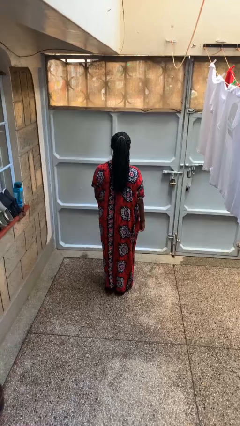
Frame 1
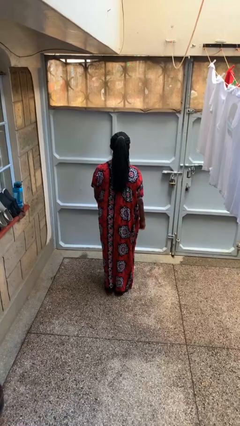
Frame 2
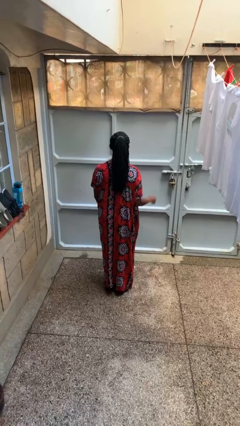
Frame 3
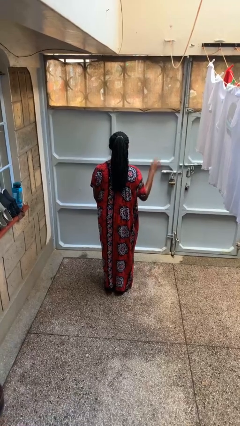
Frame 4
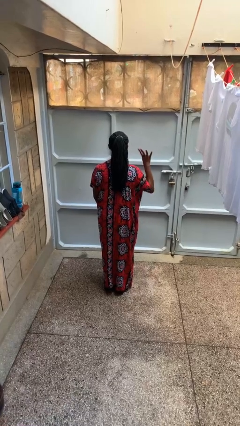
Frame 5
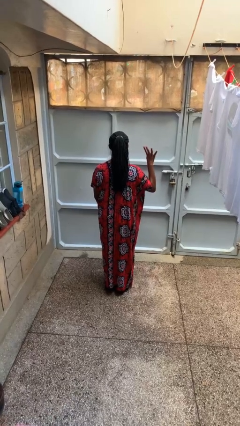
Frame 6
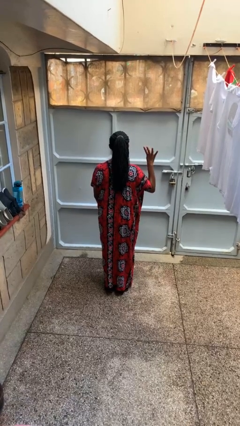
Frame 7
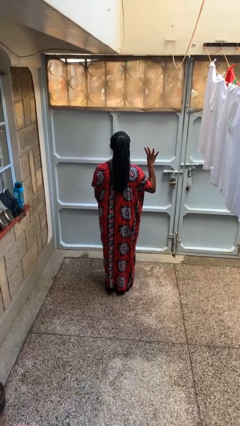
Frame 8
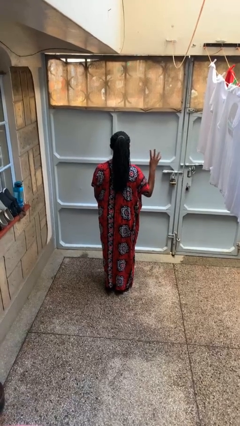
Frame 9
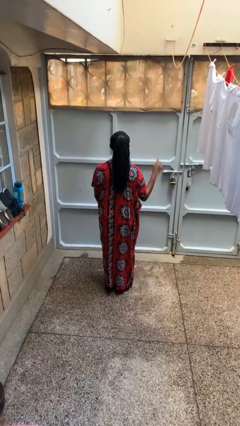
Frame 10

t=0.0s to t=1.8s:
person gestures number four

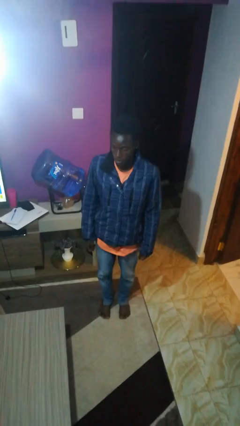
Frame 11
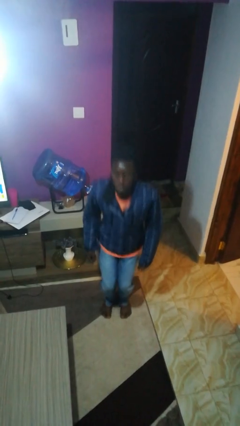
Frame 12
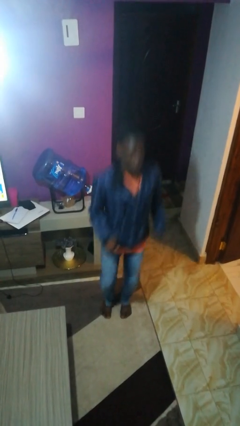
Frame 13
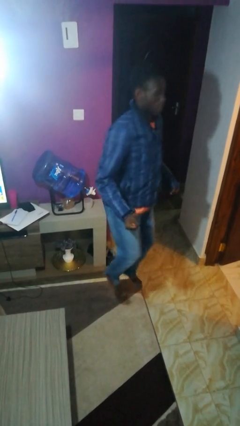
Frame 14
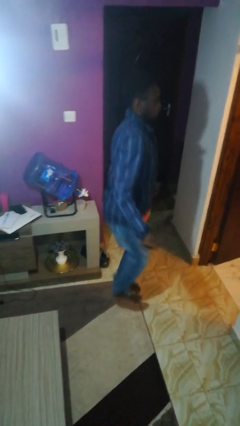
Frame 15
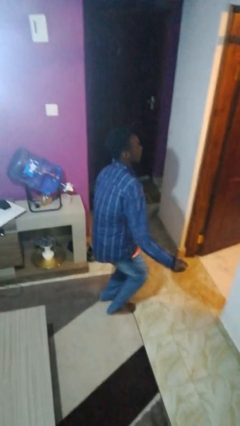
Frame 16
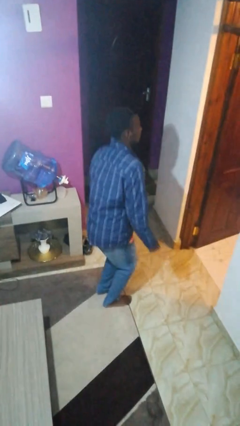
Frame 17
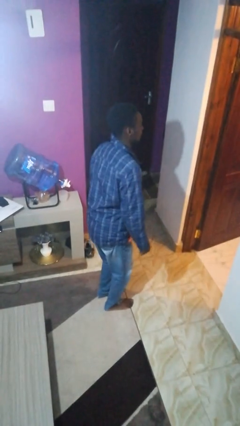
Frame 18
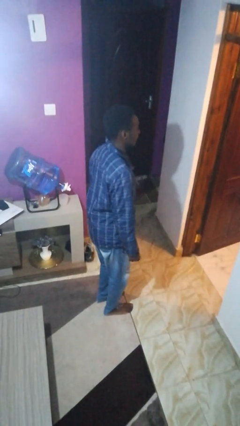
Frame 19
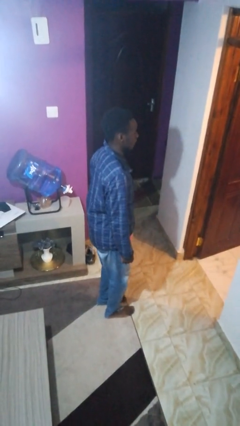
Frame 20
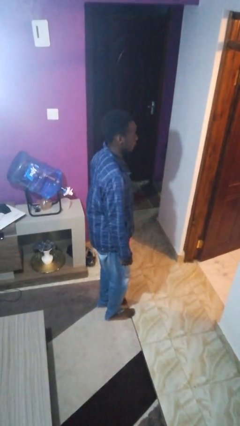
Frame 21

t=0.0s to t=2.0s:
person jumps

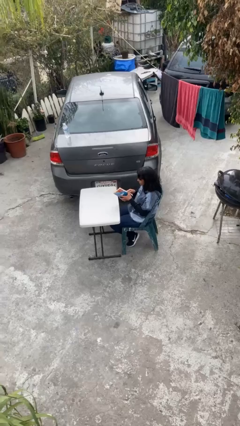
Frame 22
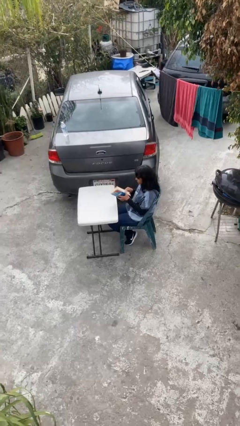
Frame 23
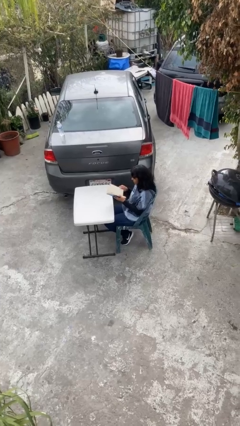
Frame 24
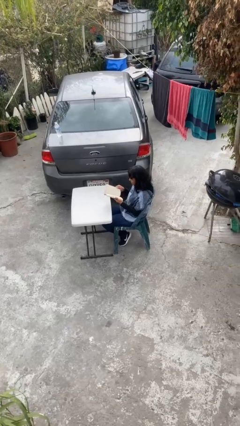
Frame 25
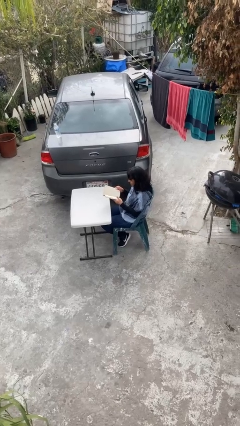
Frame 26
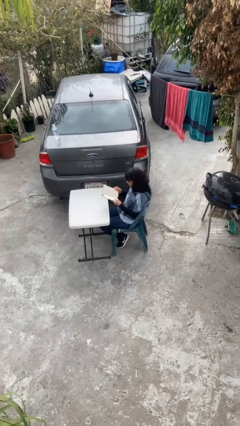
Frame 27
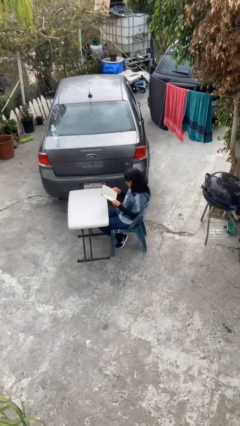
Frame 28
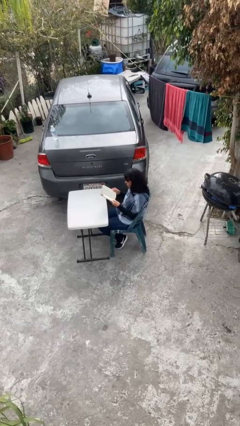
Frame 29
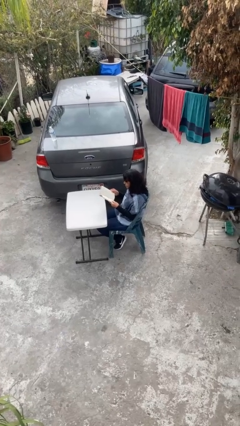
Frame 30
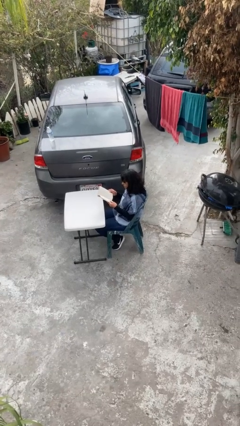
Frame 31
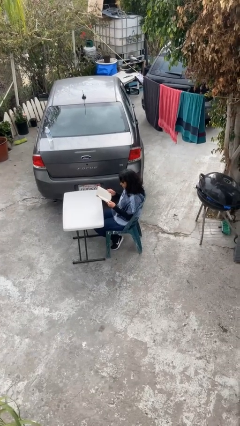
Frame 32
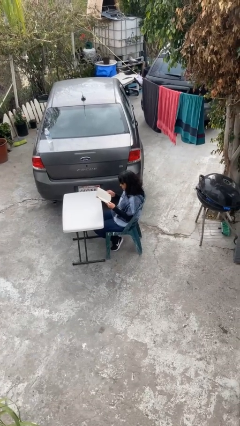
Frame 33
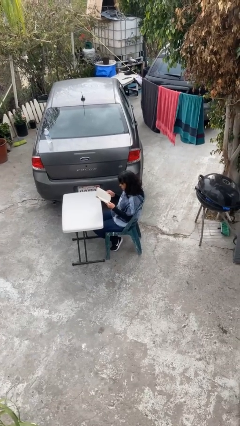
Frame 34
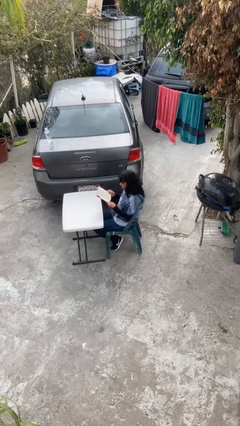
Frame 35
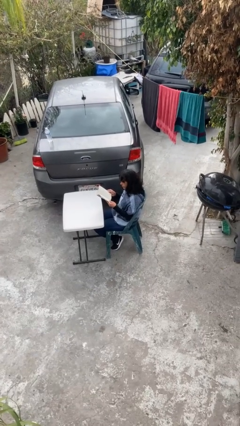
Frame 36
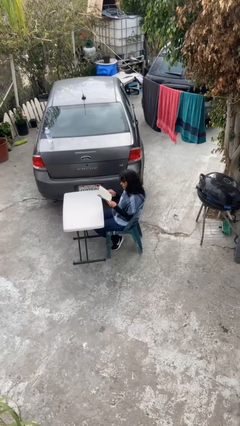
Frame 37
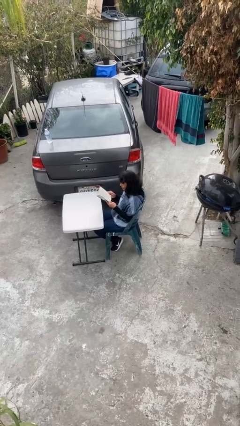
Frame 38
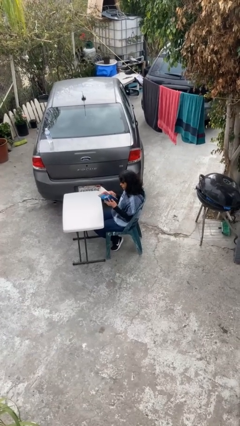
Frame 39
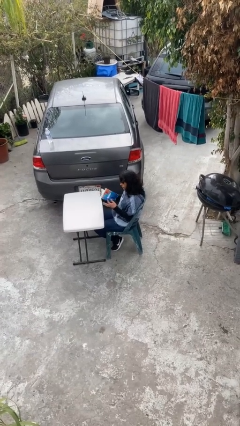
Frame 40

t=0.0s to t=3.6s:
person reads document

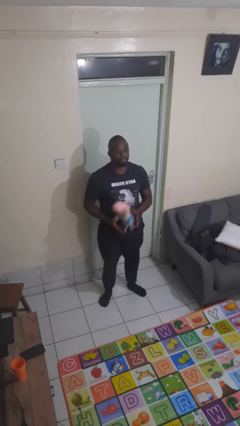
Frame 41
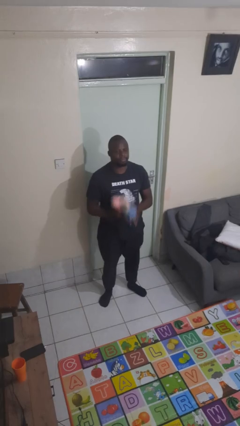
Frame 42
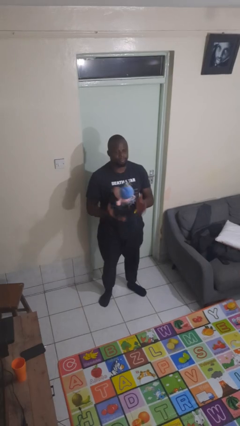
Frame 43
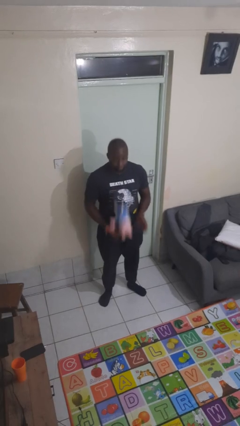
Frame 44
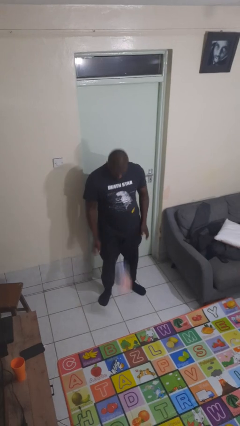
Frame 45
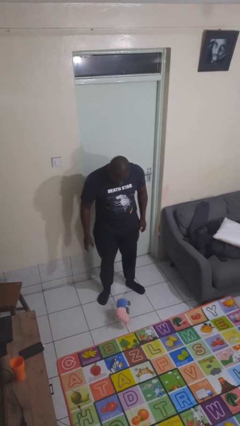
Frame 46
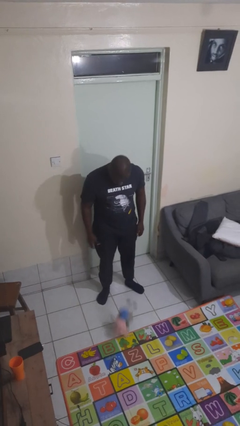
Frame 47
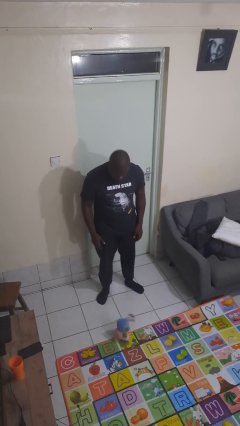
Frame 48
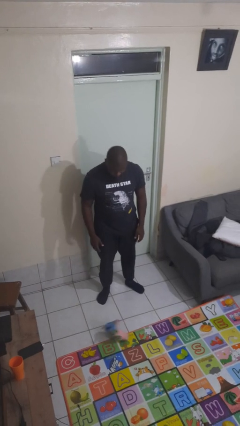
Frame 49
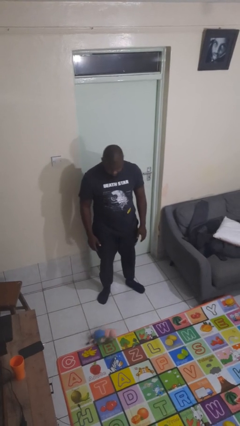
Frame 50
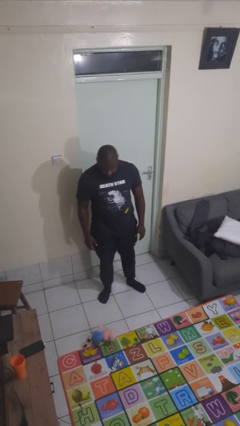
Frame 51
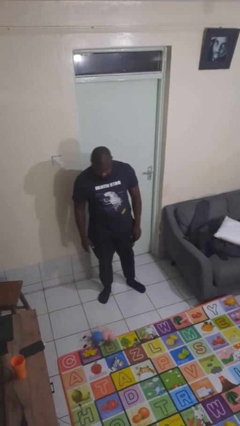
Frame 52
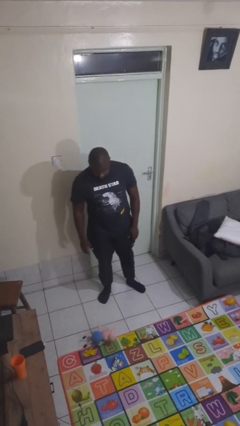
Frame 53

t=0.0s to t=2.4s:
person drops object

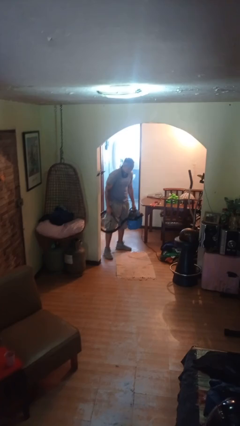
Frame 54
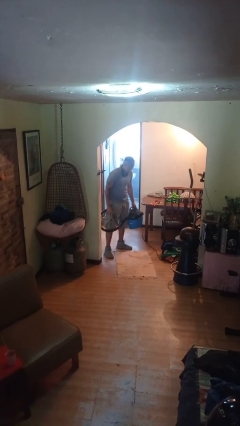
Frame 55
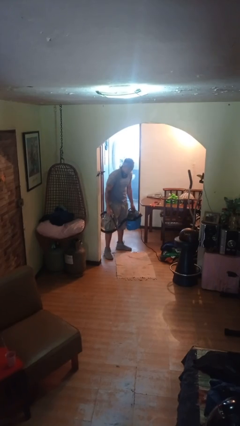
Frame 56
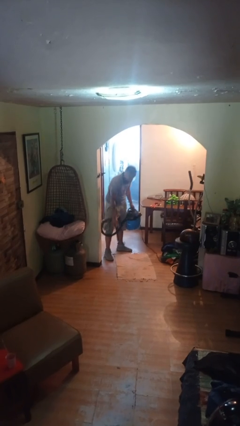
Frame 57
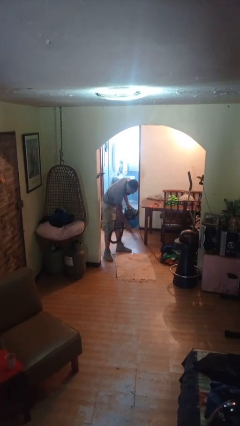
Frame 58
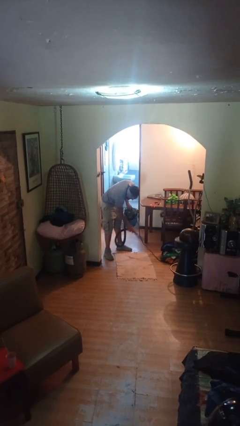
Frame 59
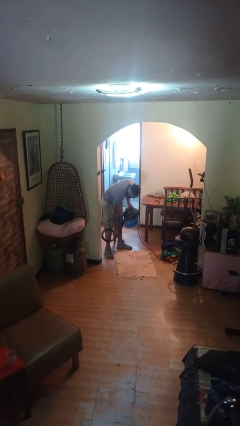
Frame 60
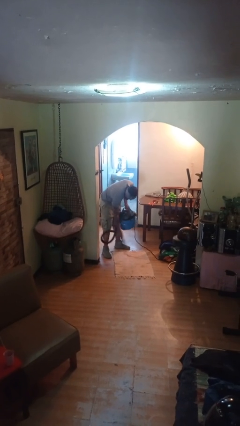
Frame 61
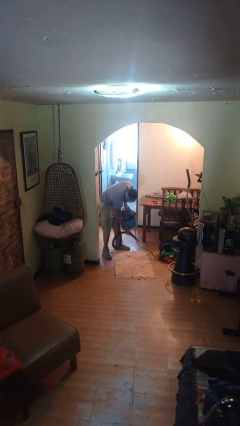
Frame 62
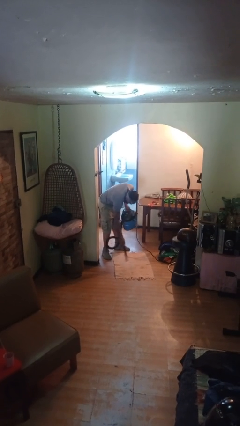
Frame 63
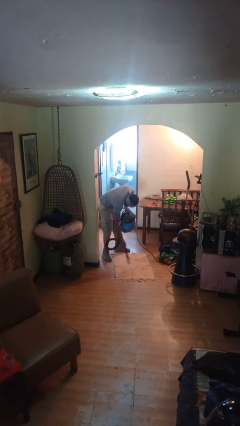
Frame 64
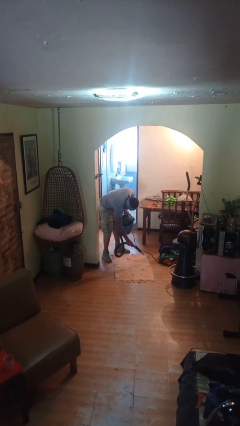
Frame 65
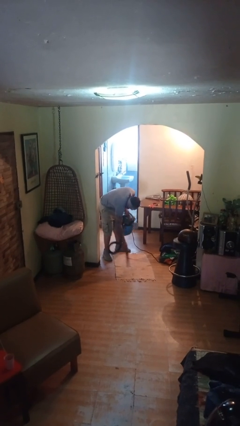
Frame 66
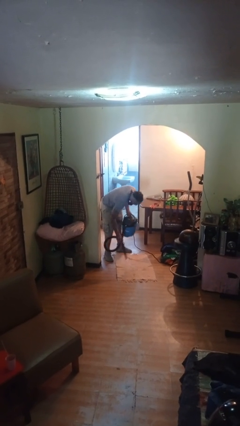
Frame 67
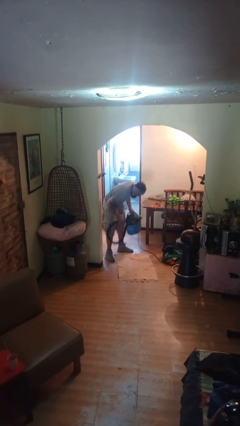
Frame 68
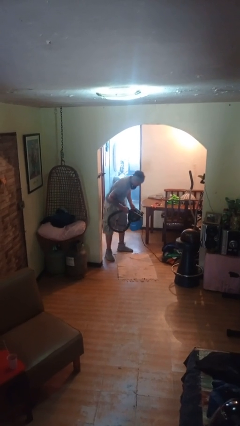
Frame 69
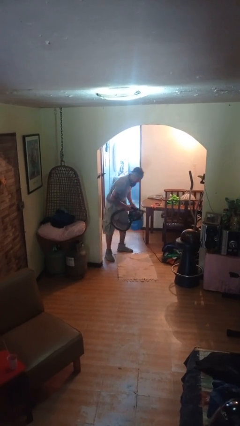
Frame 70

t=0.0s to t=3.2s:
person vacuums carpet

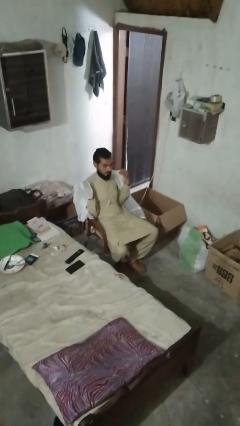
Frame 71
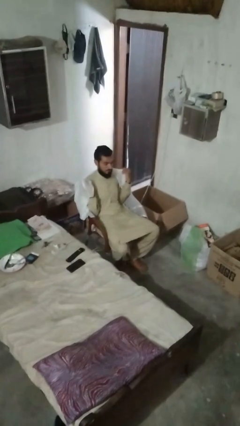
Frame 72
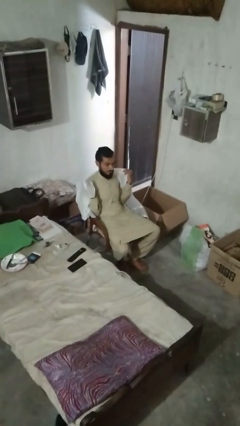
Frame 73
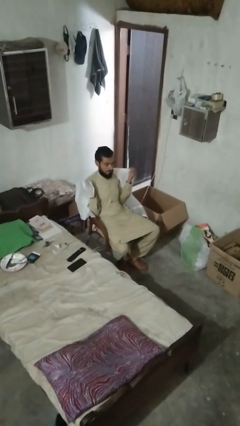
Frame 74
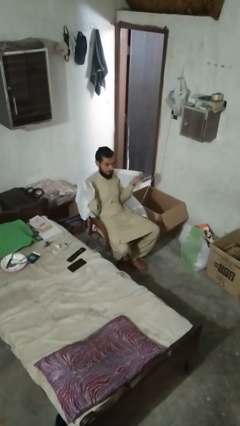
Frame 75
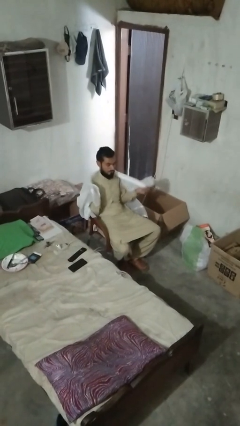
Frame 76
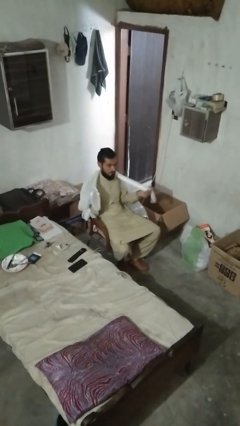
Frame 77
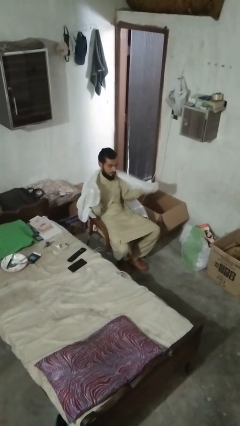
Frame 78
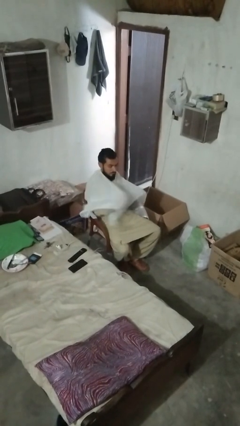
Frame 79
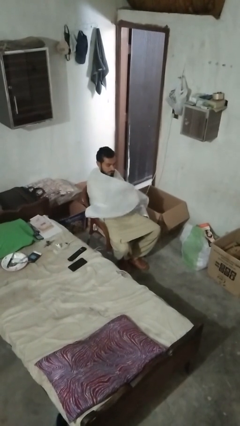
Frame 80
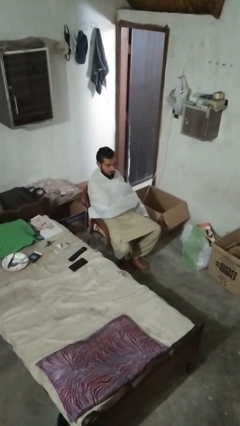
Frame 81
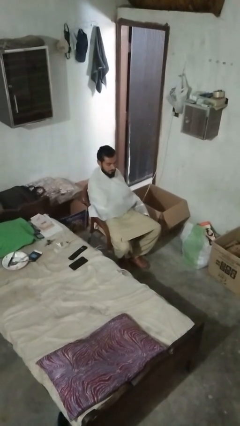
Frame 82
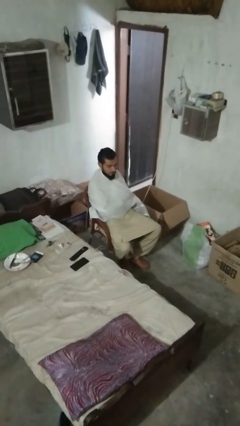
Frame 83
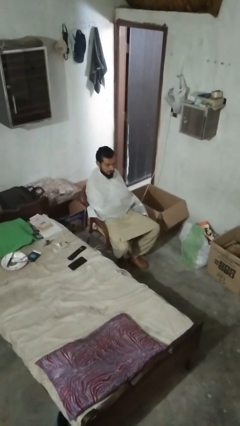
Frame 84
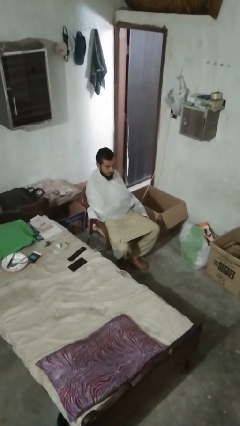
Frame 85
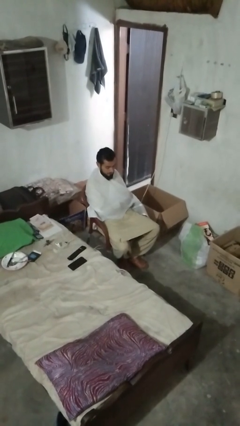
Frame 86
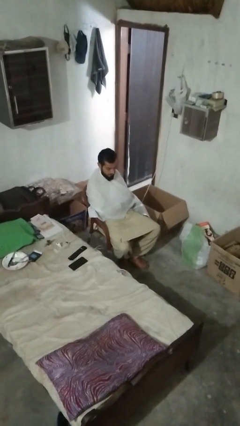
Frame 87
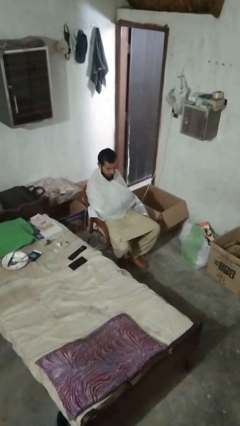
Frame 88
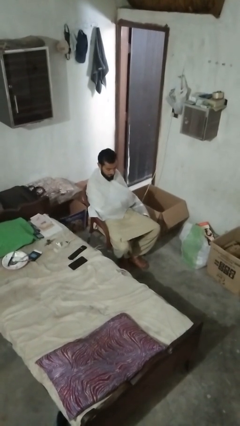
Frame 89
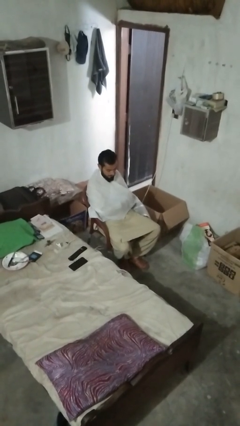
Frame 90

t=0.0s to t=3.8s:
person covers with blanket

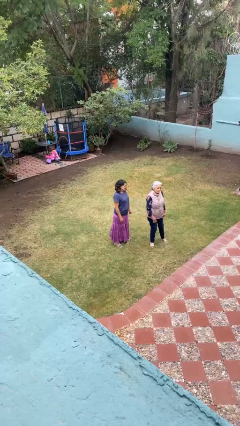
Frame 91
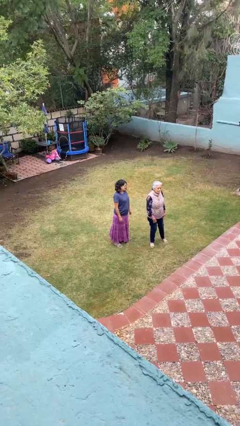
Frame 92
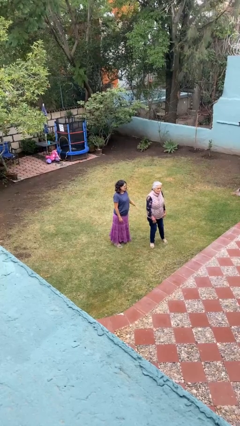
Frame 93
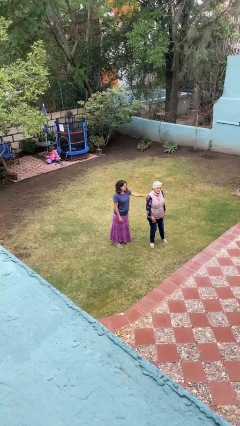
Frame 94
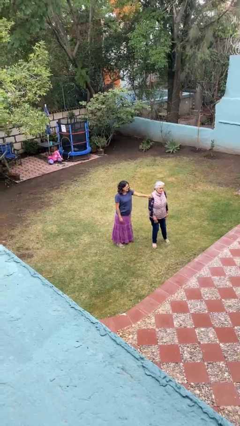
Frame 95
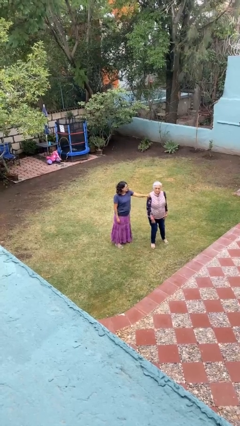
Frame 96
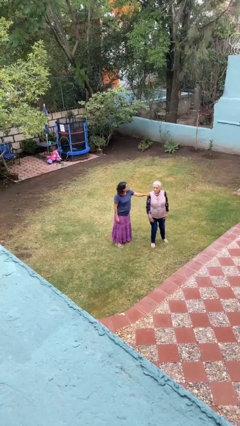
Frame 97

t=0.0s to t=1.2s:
person grabs person by shoulder
